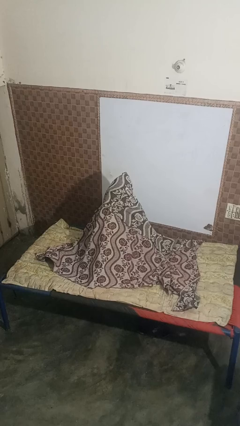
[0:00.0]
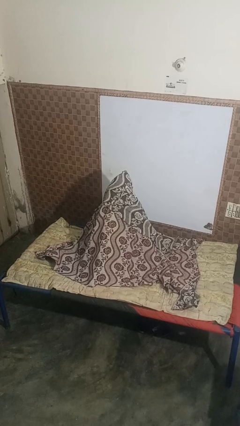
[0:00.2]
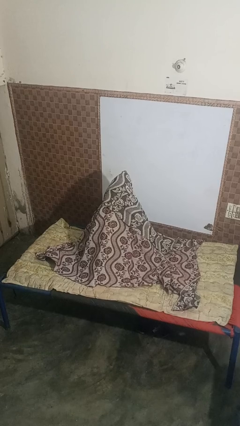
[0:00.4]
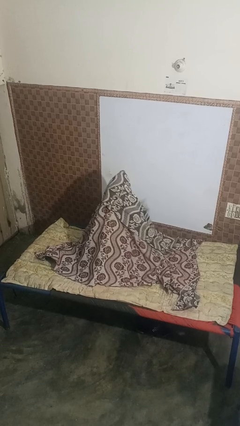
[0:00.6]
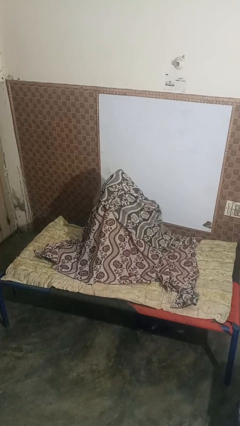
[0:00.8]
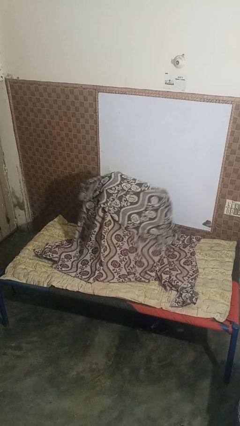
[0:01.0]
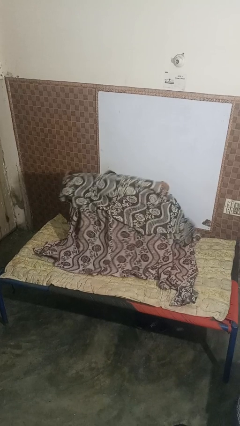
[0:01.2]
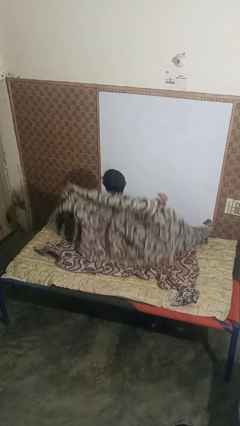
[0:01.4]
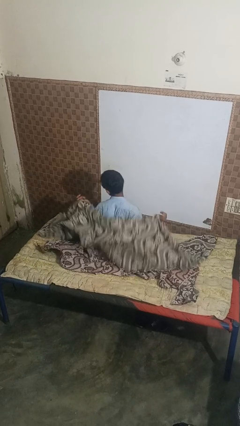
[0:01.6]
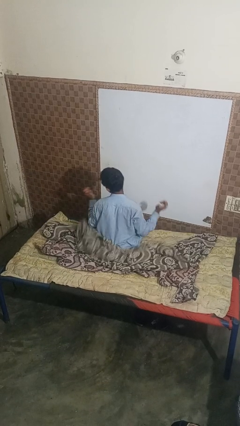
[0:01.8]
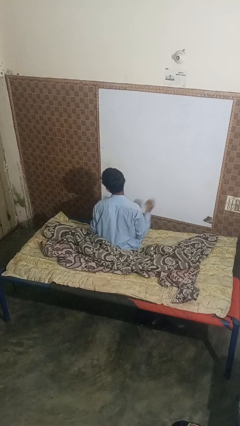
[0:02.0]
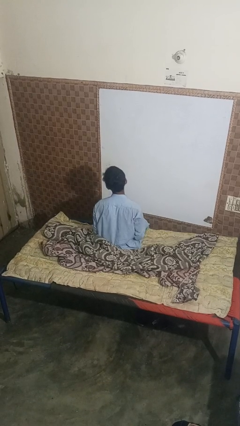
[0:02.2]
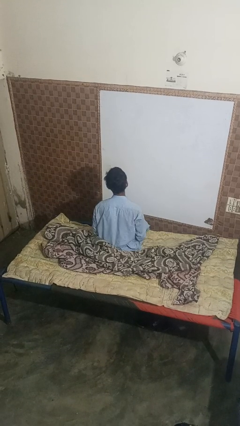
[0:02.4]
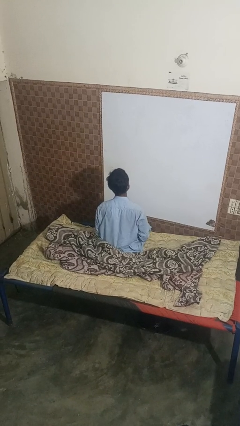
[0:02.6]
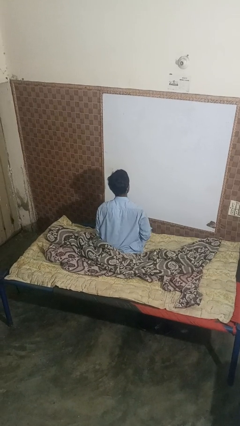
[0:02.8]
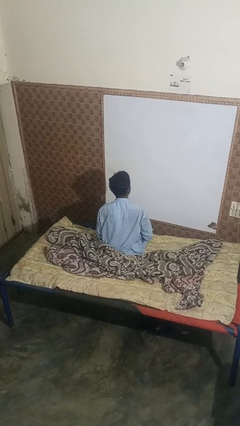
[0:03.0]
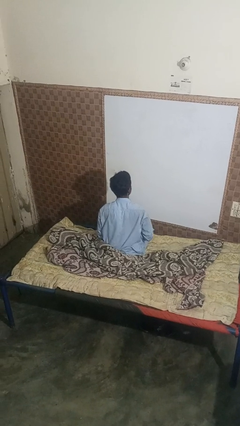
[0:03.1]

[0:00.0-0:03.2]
person uncovers with blanket

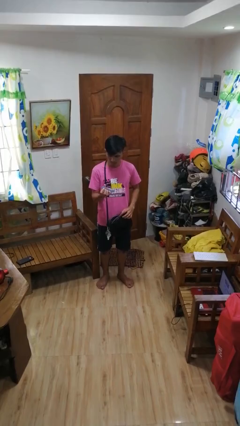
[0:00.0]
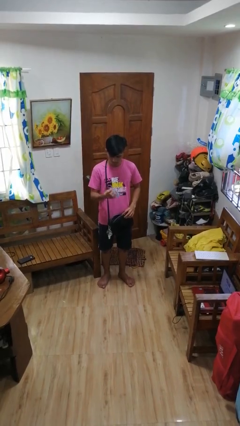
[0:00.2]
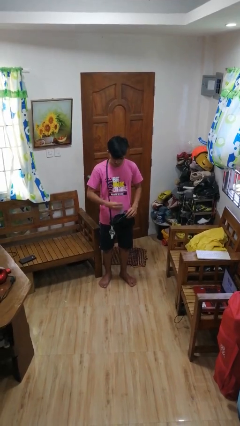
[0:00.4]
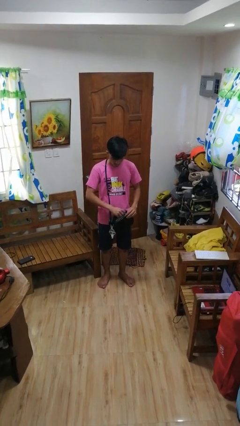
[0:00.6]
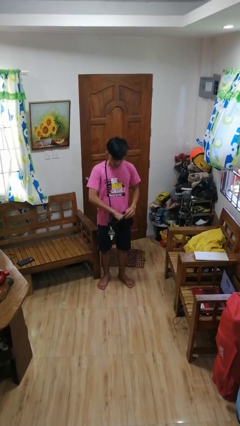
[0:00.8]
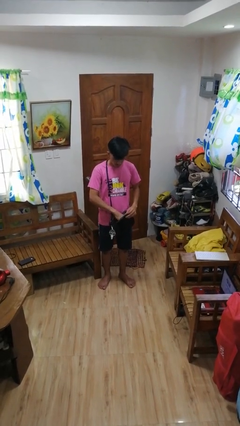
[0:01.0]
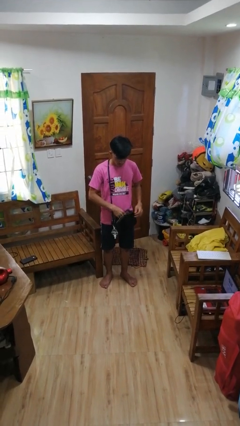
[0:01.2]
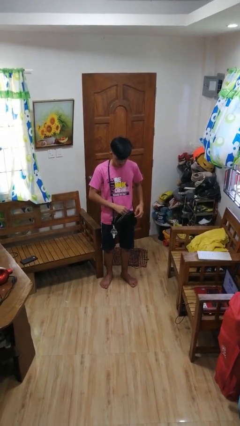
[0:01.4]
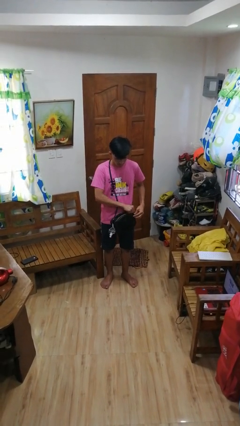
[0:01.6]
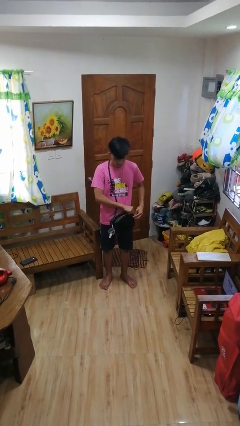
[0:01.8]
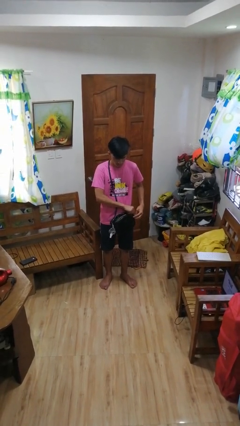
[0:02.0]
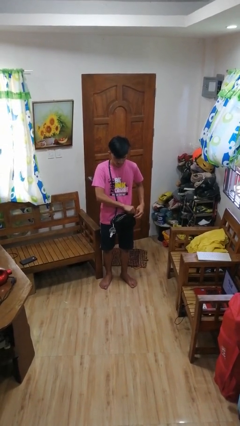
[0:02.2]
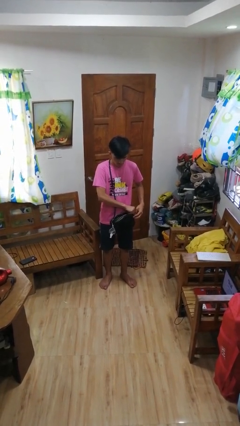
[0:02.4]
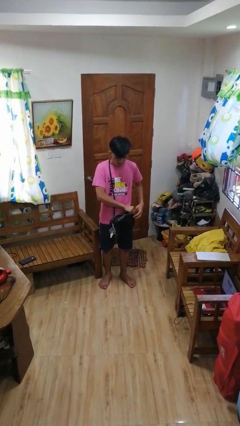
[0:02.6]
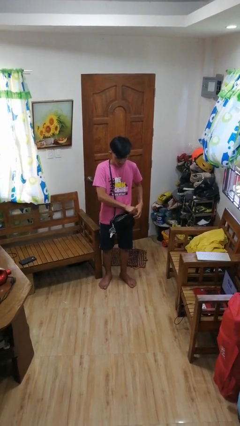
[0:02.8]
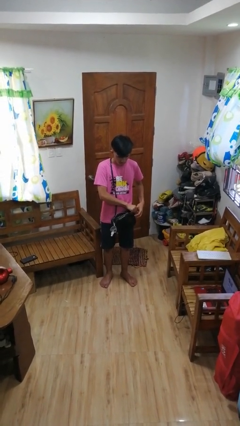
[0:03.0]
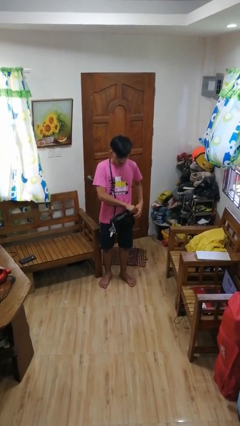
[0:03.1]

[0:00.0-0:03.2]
person puts object into purse

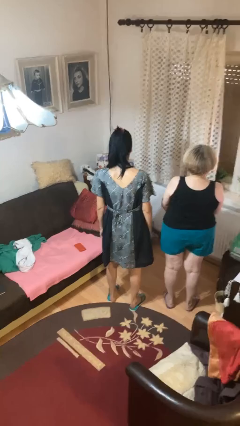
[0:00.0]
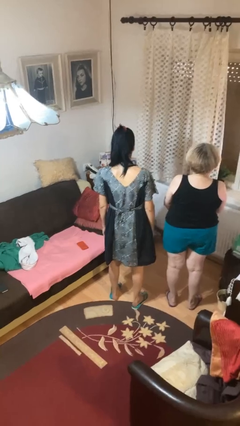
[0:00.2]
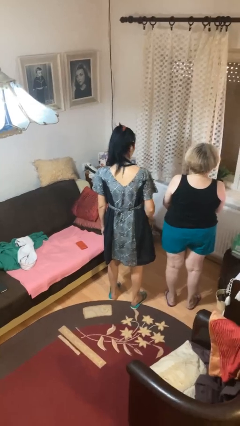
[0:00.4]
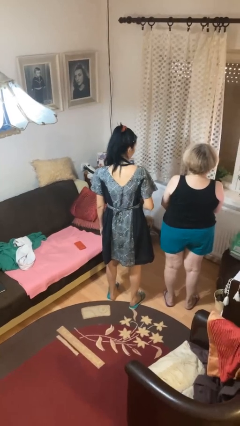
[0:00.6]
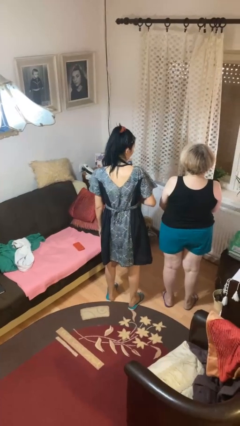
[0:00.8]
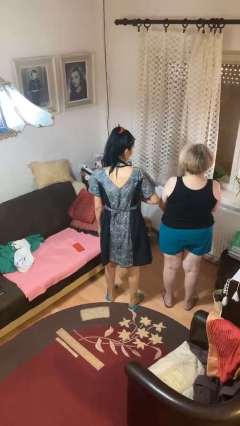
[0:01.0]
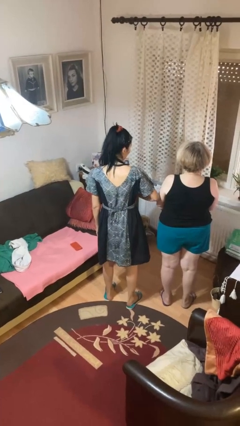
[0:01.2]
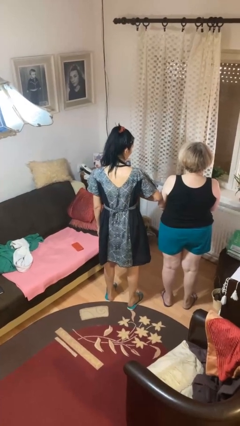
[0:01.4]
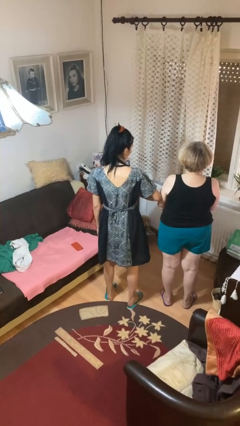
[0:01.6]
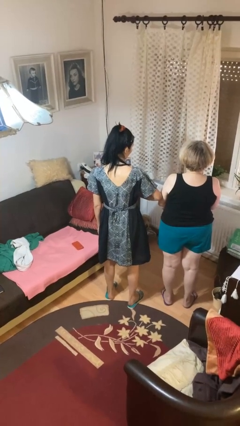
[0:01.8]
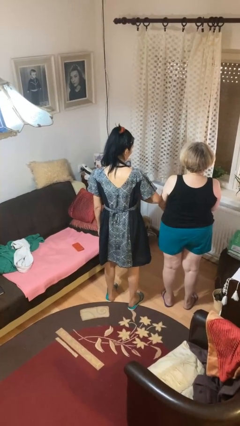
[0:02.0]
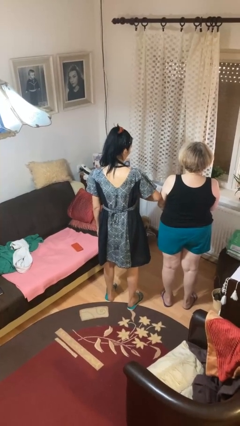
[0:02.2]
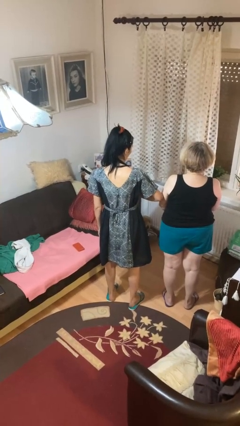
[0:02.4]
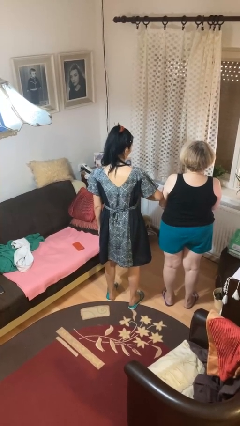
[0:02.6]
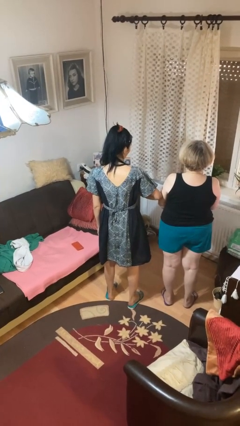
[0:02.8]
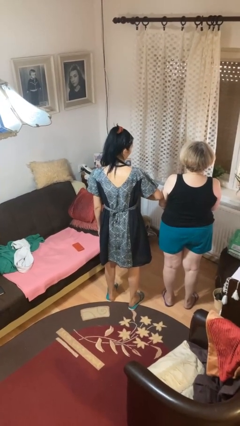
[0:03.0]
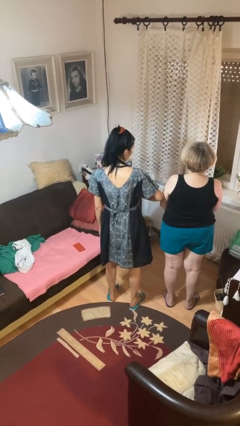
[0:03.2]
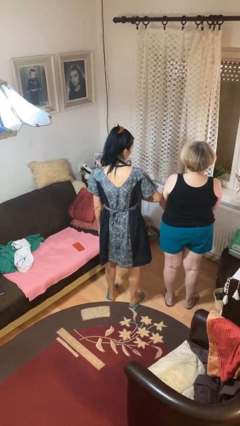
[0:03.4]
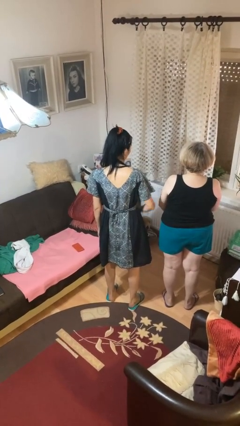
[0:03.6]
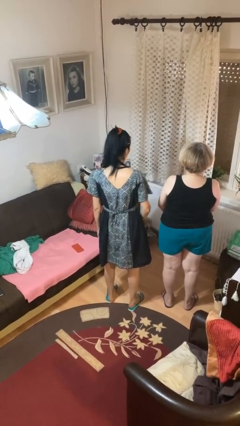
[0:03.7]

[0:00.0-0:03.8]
person nudges person with elbow

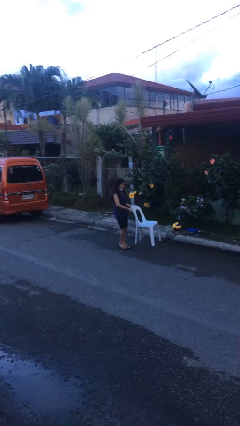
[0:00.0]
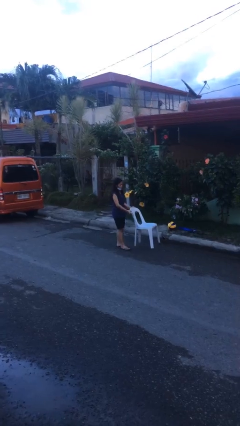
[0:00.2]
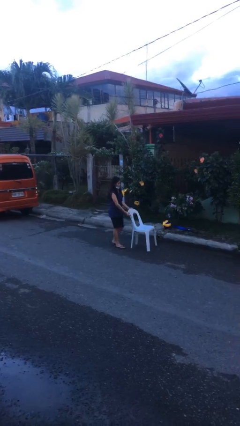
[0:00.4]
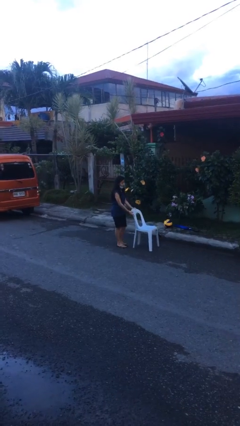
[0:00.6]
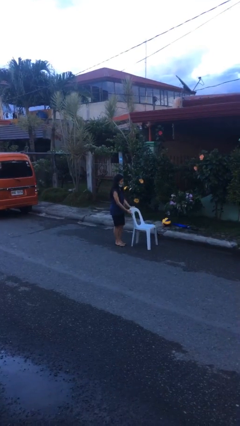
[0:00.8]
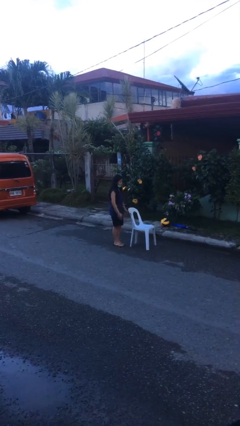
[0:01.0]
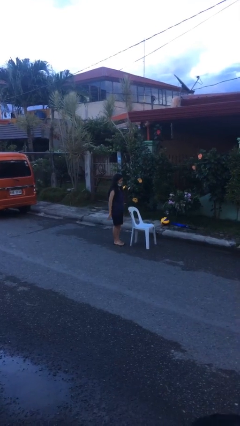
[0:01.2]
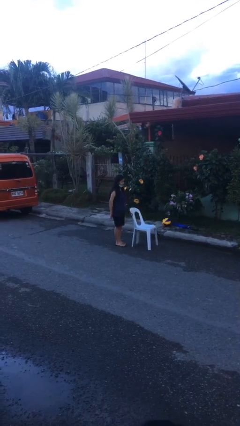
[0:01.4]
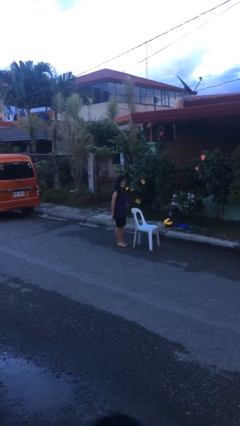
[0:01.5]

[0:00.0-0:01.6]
person puts down object on floor

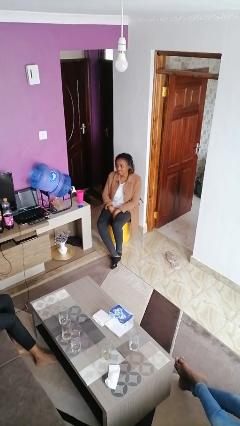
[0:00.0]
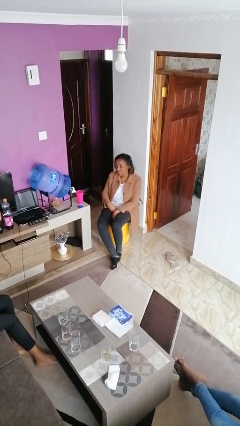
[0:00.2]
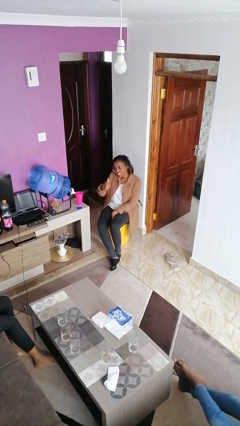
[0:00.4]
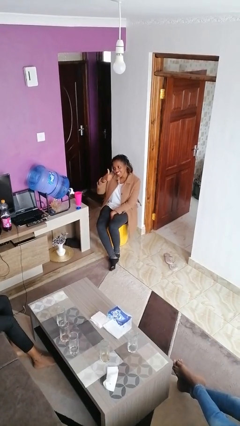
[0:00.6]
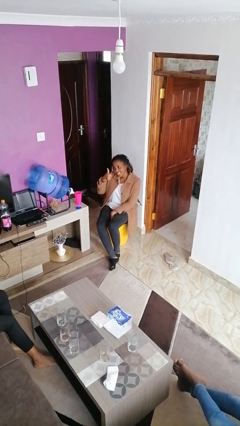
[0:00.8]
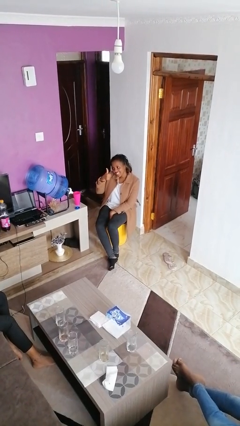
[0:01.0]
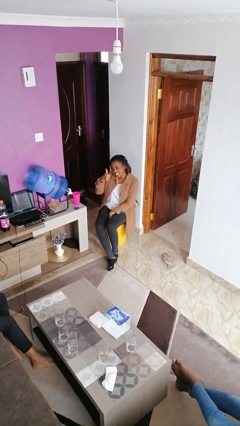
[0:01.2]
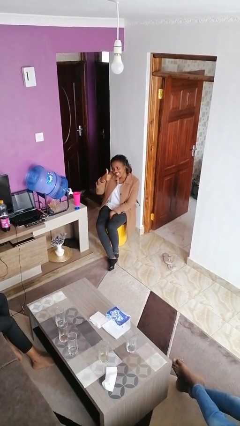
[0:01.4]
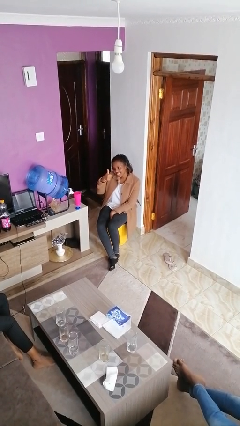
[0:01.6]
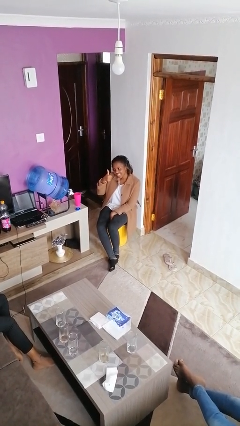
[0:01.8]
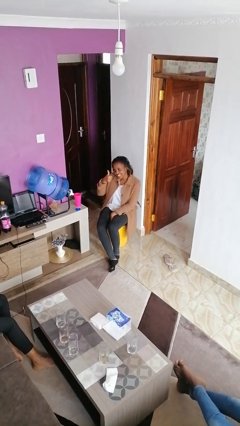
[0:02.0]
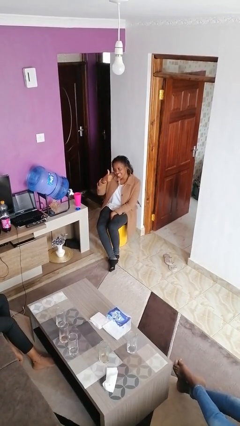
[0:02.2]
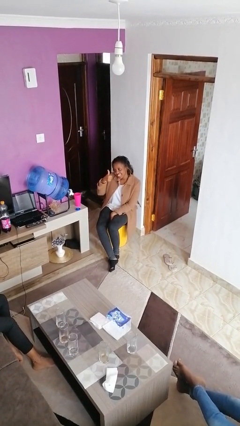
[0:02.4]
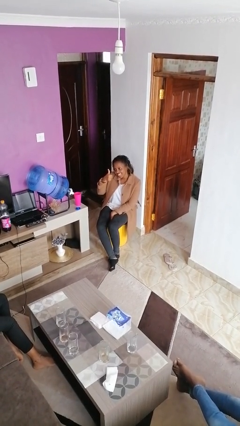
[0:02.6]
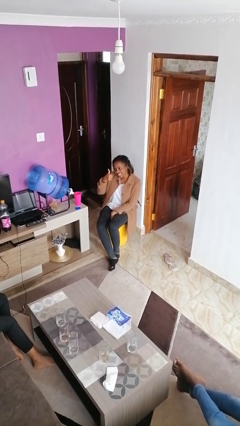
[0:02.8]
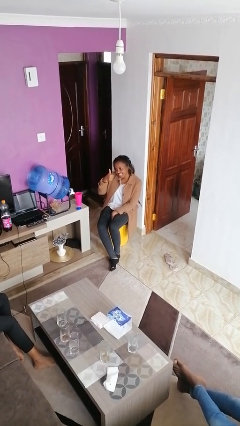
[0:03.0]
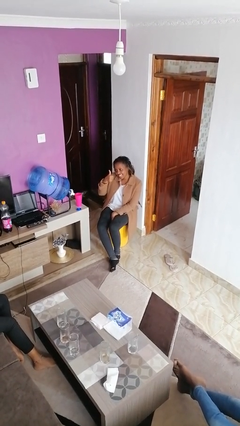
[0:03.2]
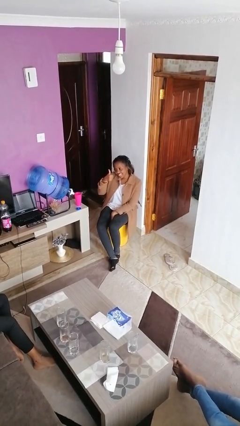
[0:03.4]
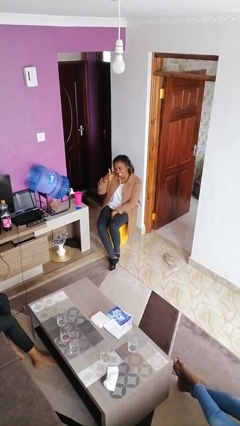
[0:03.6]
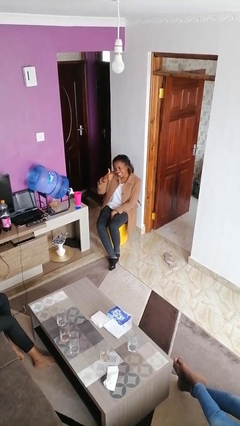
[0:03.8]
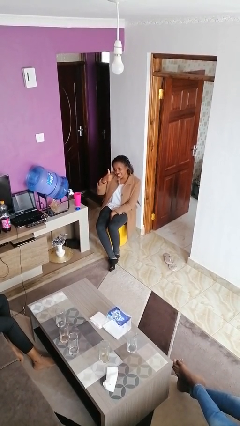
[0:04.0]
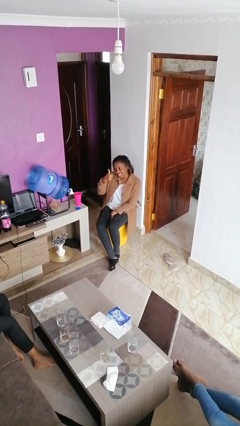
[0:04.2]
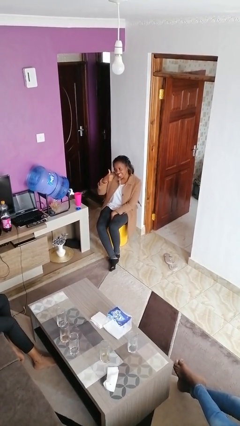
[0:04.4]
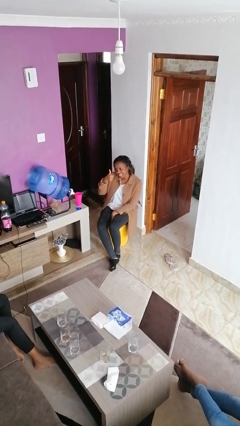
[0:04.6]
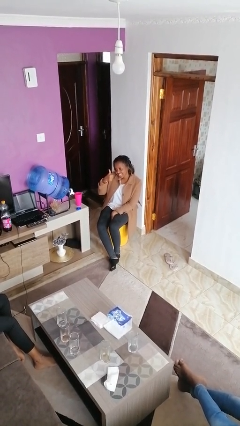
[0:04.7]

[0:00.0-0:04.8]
person gestures thumbs up

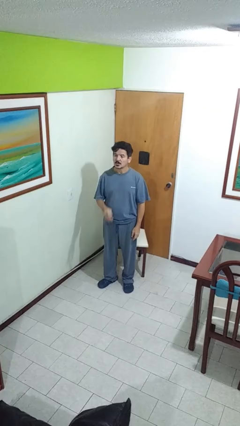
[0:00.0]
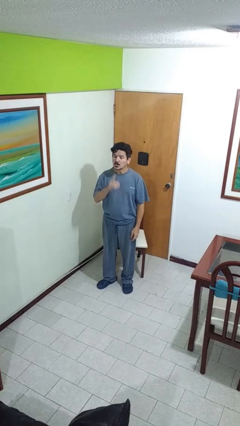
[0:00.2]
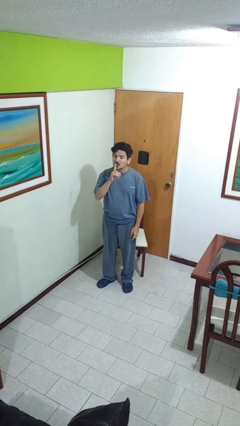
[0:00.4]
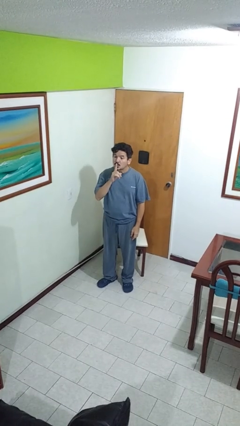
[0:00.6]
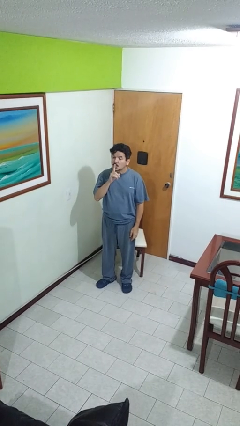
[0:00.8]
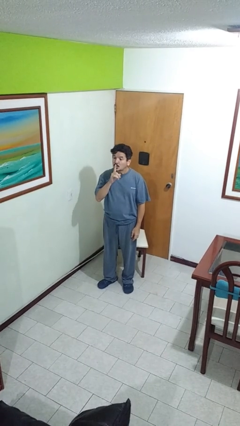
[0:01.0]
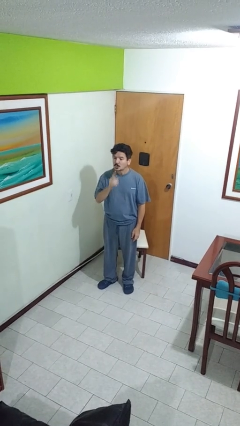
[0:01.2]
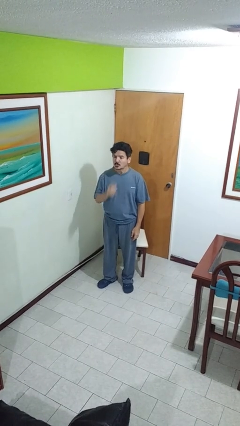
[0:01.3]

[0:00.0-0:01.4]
person gestures be quiet
